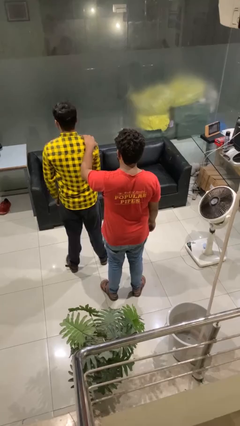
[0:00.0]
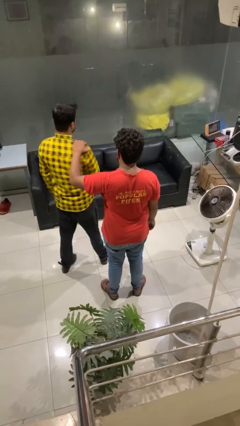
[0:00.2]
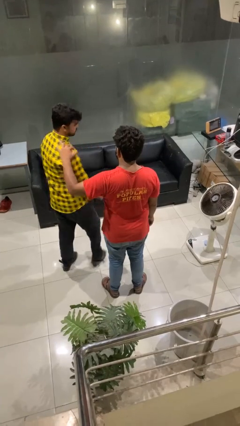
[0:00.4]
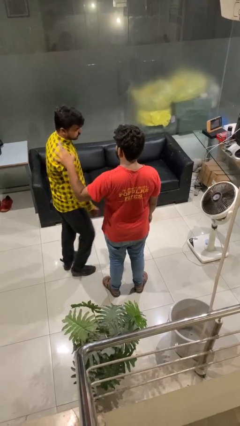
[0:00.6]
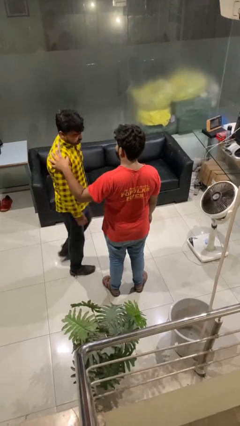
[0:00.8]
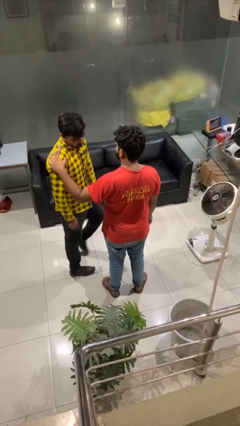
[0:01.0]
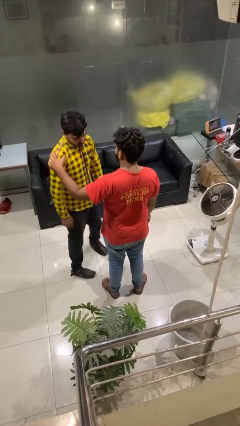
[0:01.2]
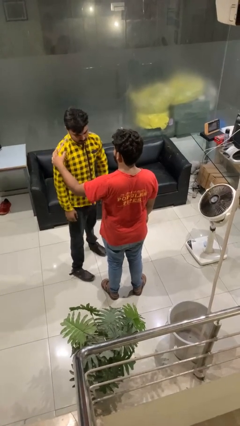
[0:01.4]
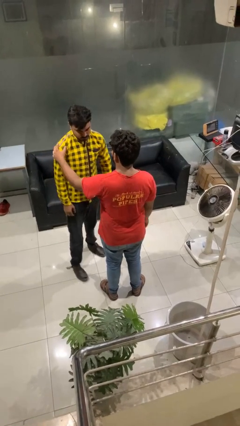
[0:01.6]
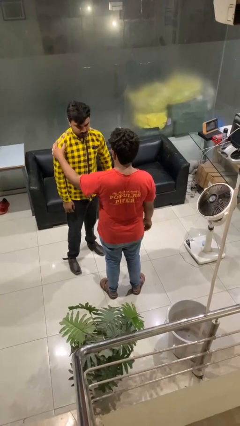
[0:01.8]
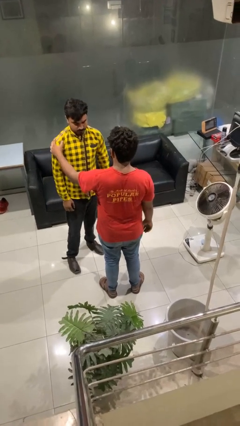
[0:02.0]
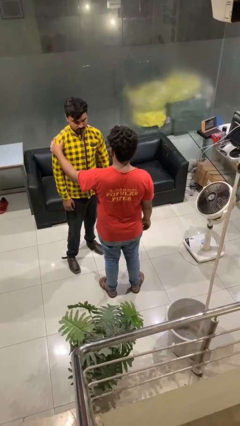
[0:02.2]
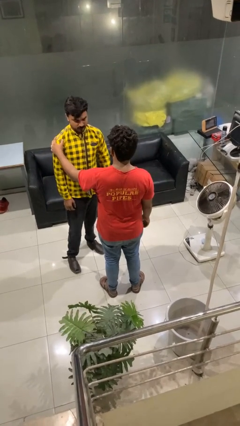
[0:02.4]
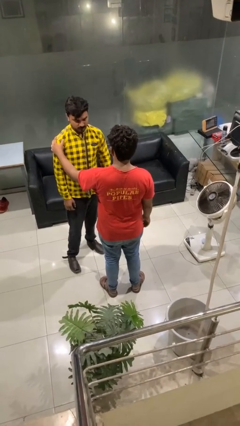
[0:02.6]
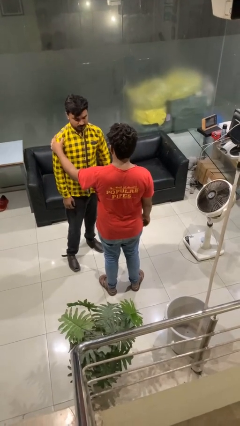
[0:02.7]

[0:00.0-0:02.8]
person spins person around

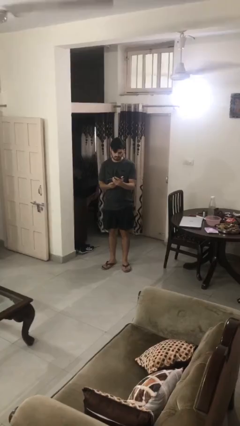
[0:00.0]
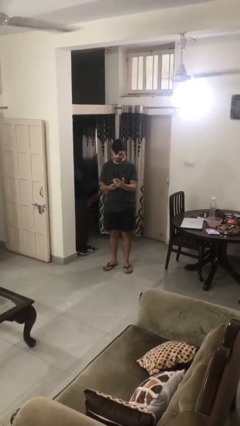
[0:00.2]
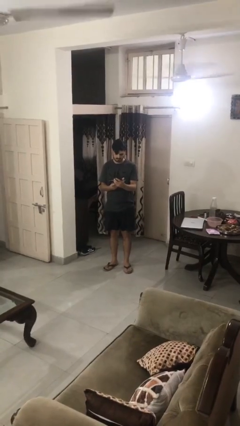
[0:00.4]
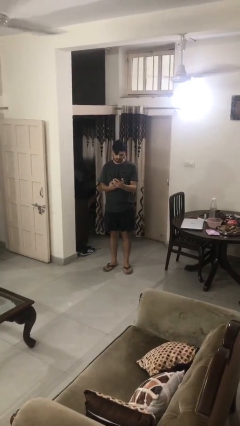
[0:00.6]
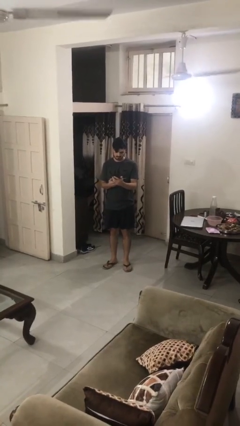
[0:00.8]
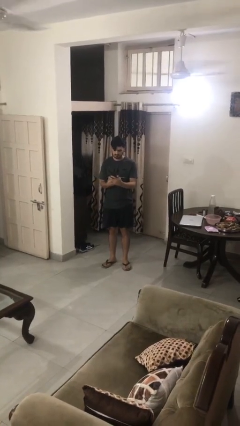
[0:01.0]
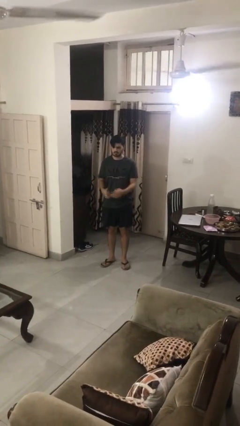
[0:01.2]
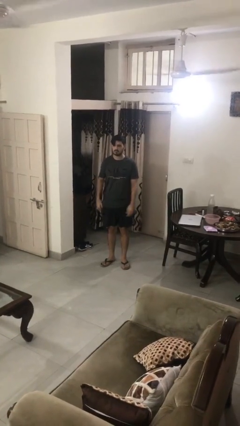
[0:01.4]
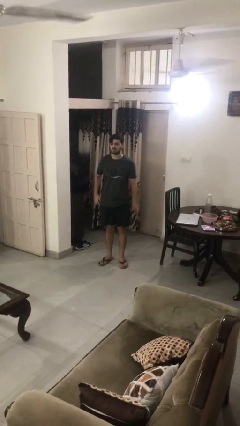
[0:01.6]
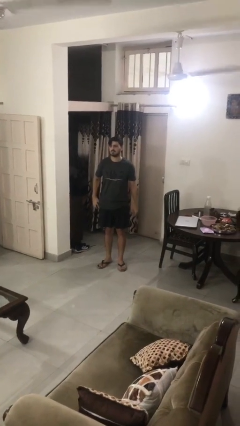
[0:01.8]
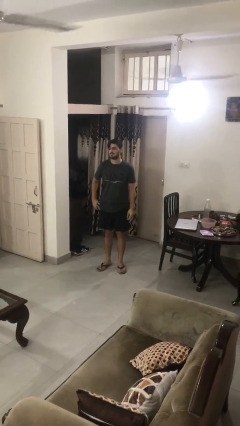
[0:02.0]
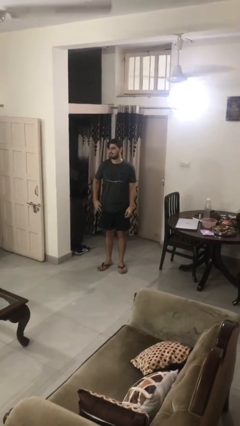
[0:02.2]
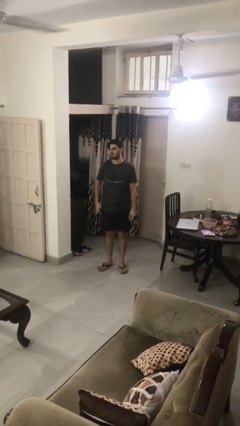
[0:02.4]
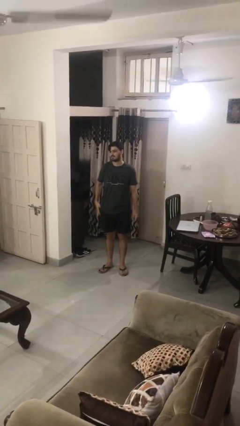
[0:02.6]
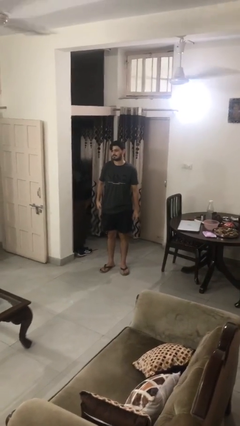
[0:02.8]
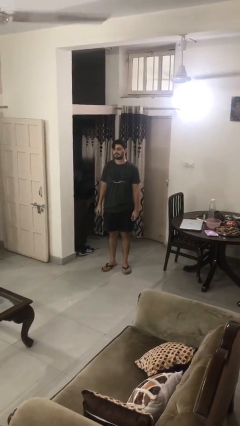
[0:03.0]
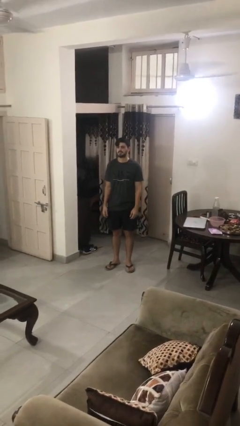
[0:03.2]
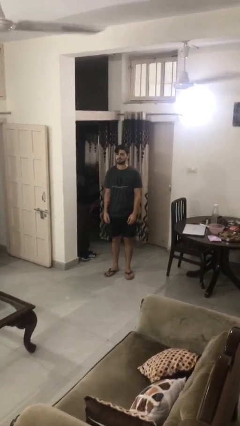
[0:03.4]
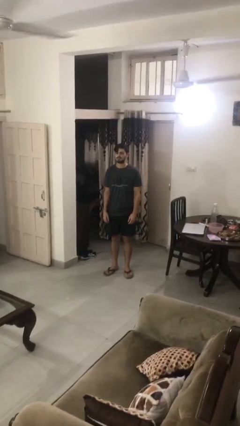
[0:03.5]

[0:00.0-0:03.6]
person puts phone into pocket

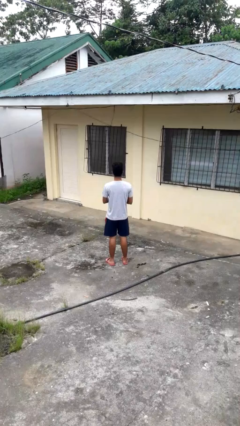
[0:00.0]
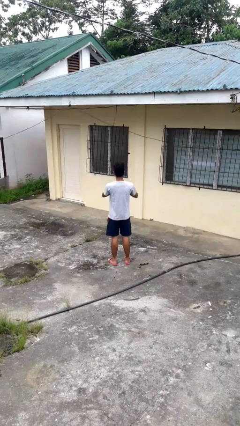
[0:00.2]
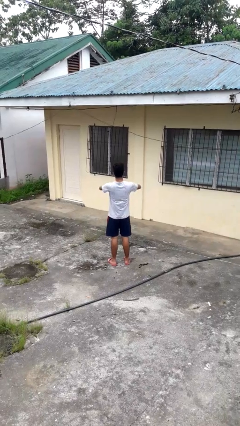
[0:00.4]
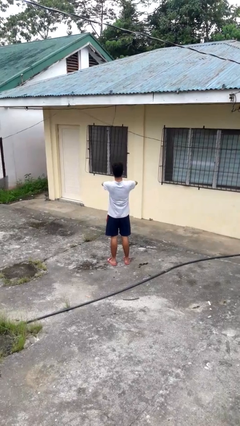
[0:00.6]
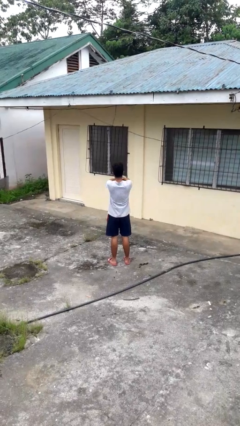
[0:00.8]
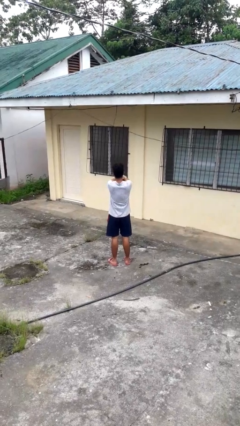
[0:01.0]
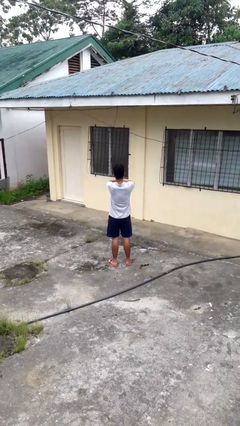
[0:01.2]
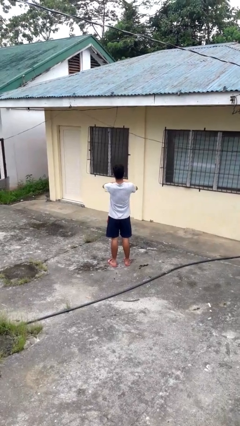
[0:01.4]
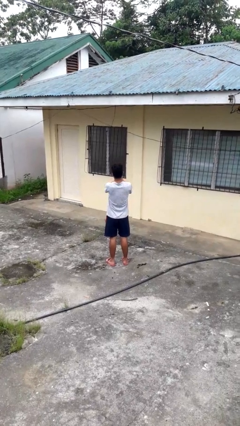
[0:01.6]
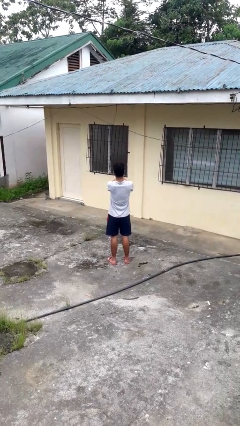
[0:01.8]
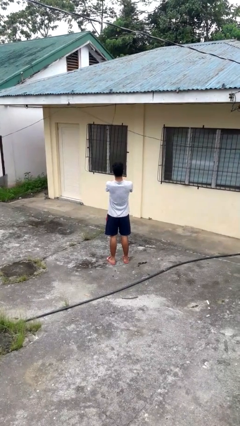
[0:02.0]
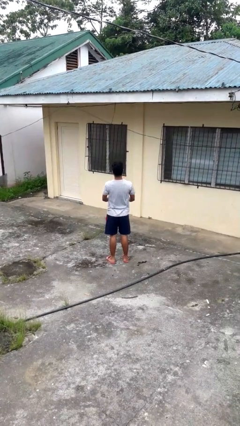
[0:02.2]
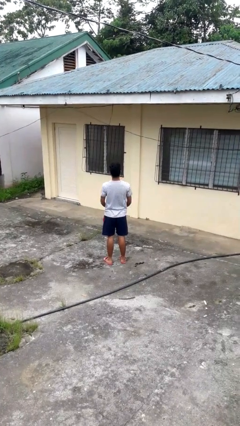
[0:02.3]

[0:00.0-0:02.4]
person cracks knuckles

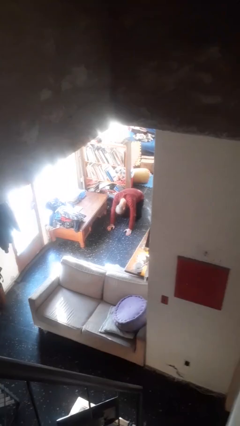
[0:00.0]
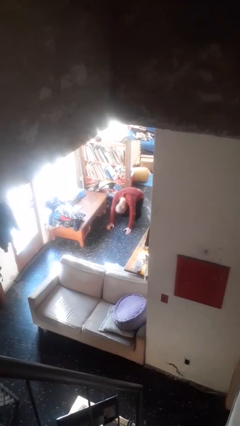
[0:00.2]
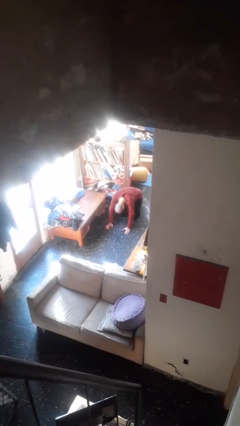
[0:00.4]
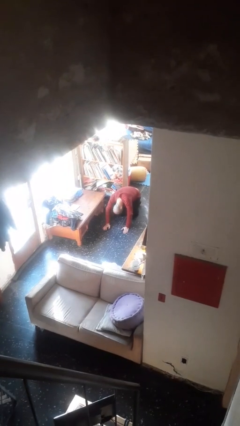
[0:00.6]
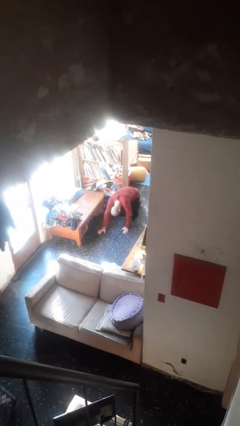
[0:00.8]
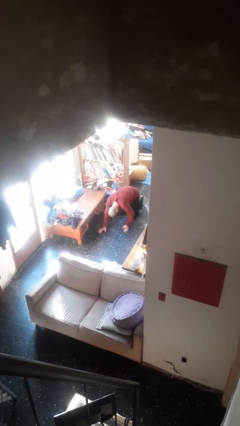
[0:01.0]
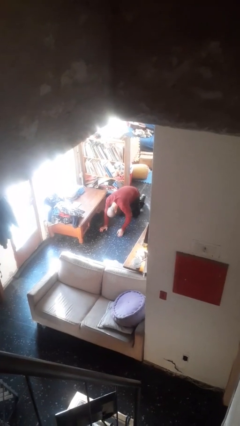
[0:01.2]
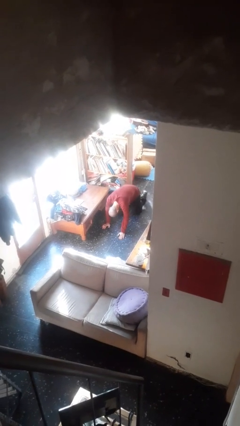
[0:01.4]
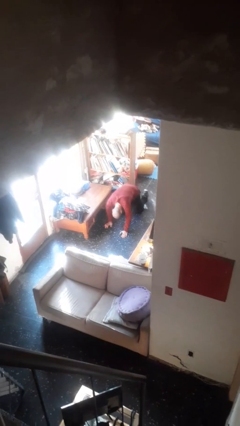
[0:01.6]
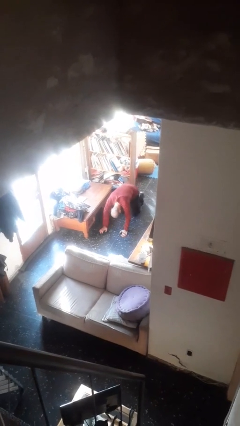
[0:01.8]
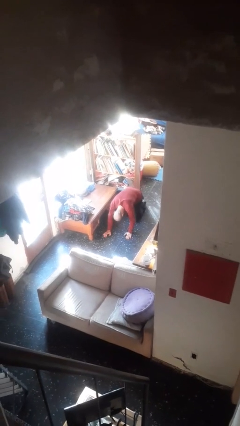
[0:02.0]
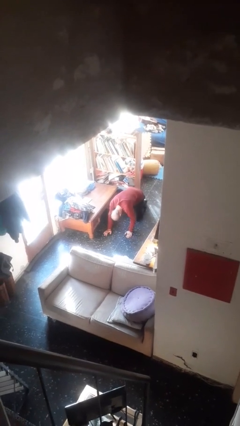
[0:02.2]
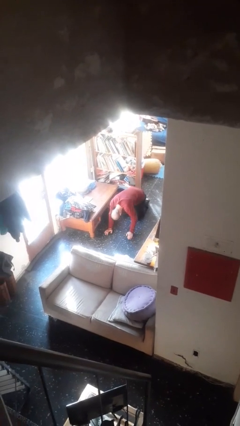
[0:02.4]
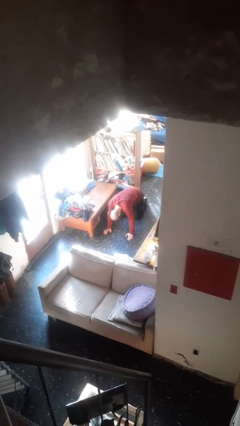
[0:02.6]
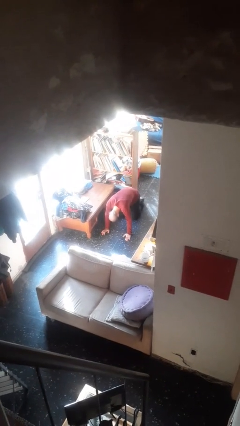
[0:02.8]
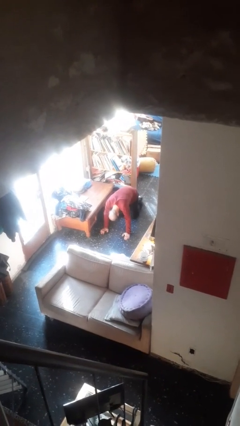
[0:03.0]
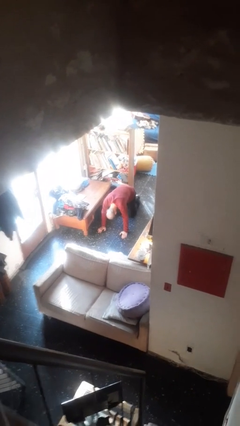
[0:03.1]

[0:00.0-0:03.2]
person crawls

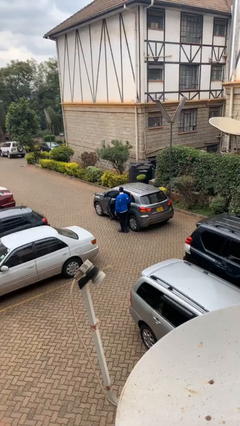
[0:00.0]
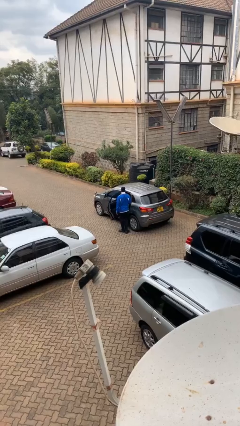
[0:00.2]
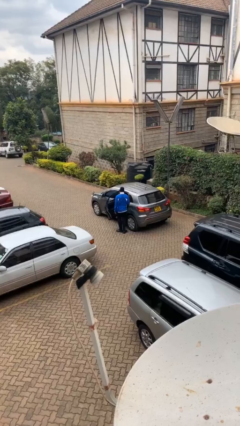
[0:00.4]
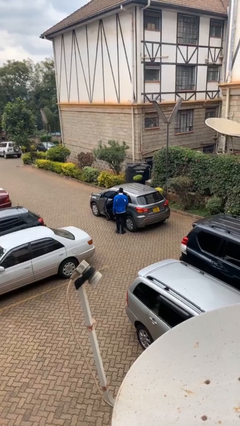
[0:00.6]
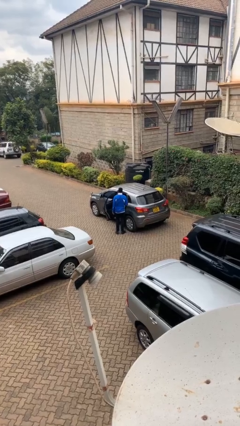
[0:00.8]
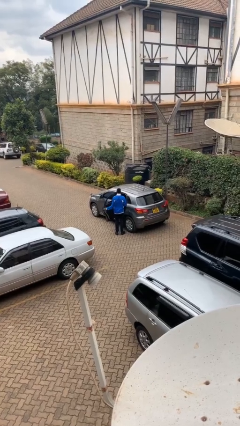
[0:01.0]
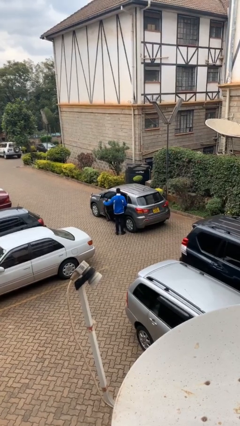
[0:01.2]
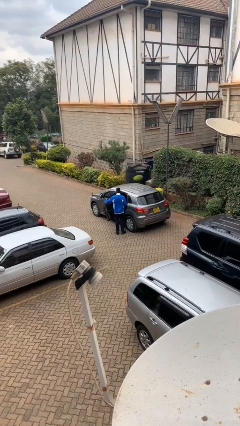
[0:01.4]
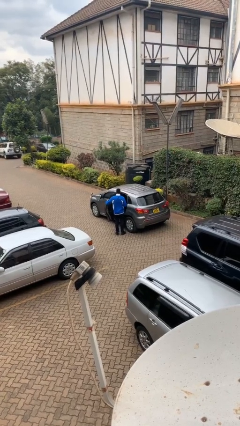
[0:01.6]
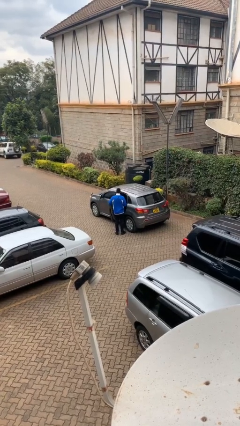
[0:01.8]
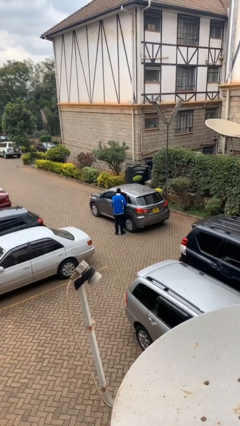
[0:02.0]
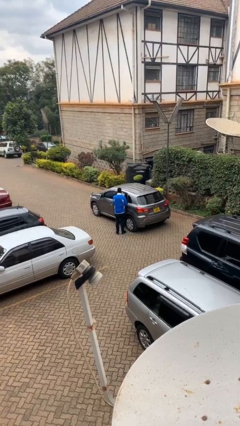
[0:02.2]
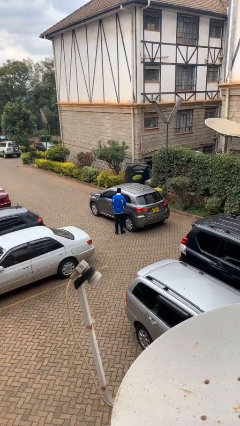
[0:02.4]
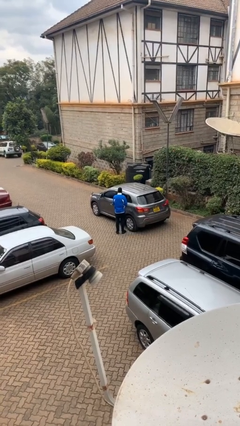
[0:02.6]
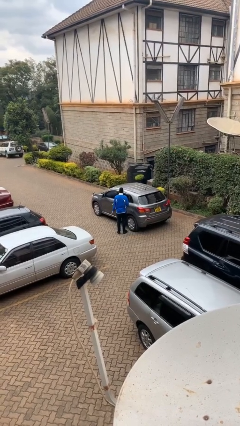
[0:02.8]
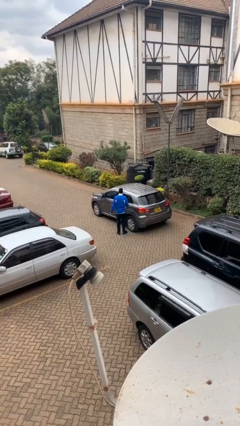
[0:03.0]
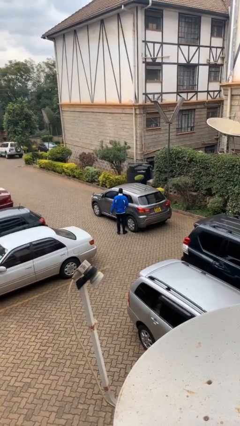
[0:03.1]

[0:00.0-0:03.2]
person closes car door

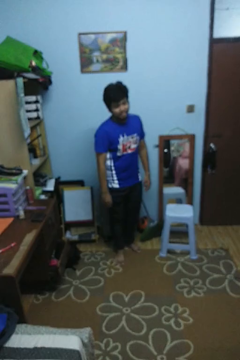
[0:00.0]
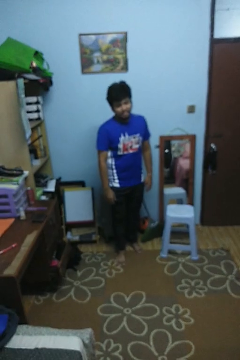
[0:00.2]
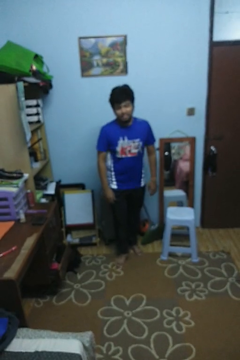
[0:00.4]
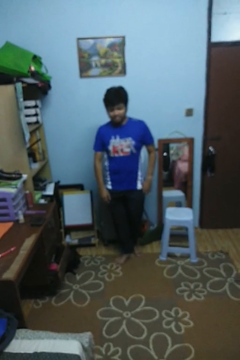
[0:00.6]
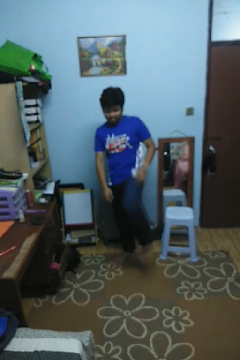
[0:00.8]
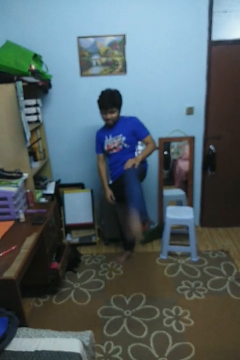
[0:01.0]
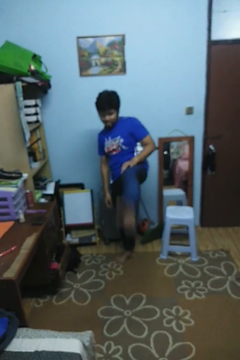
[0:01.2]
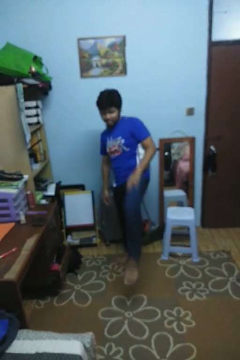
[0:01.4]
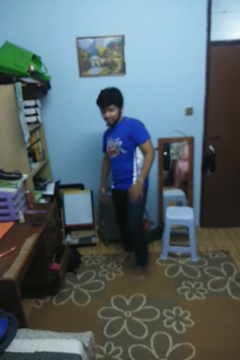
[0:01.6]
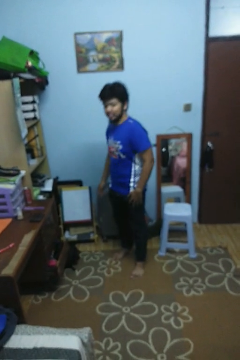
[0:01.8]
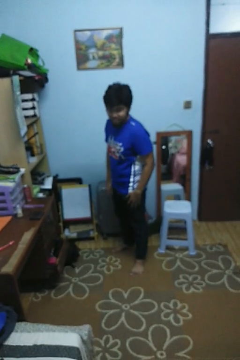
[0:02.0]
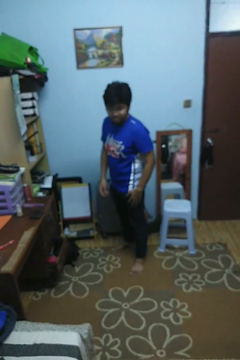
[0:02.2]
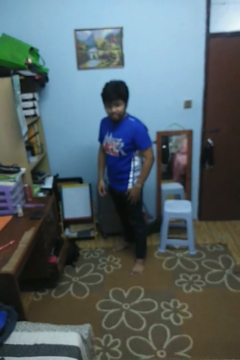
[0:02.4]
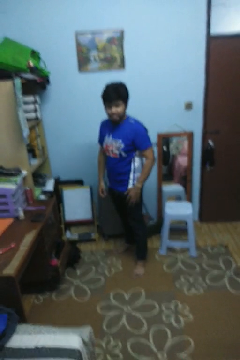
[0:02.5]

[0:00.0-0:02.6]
person karate kicks
